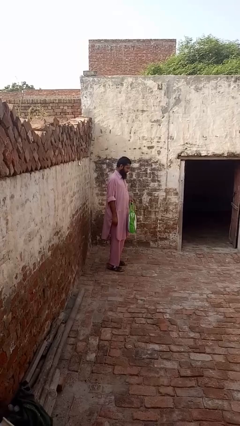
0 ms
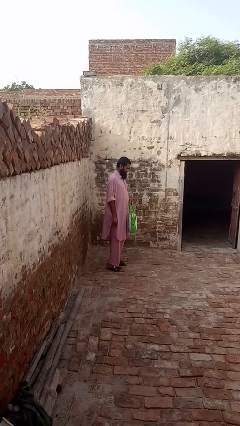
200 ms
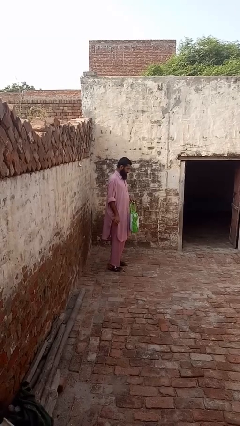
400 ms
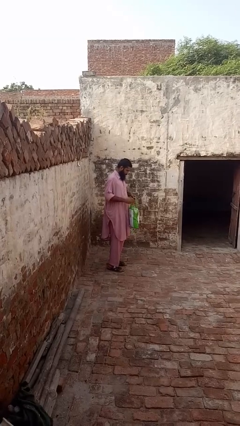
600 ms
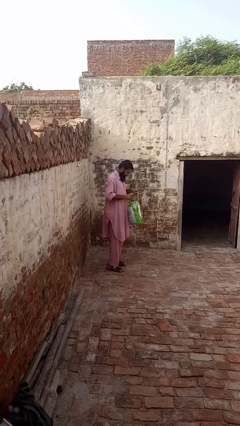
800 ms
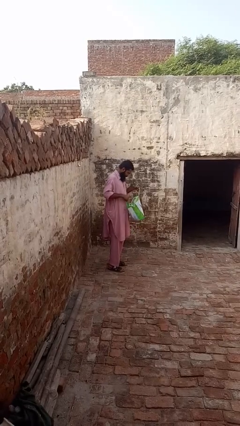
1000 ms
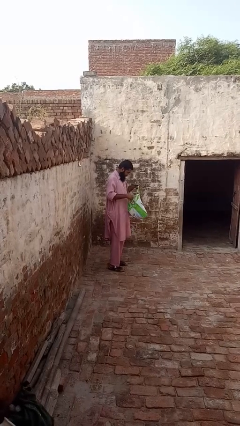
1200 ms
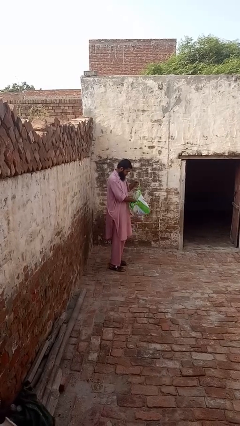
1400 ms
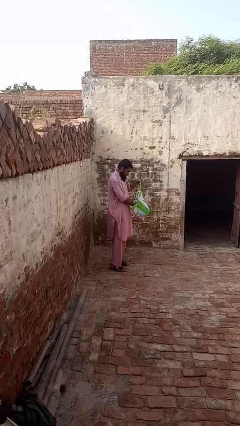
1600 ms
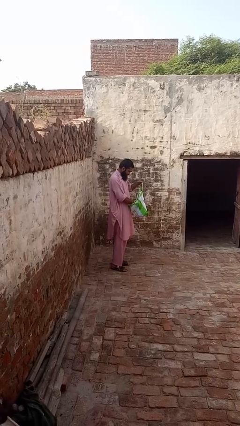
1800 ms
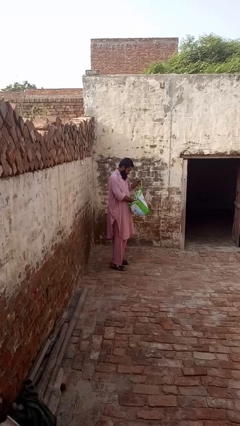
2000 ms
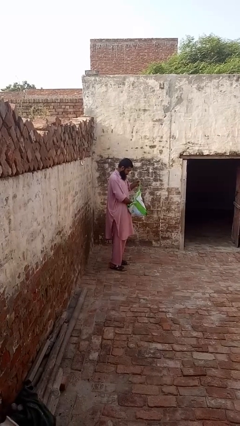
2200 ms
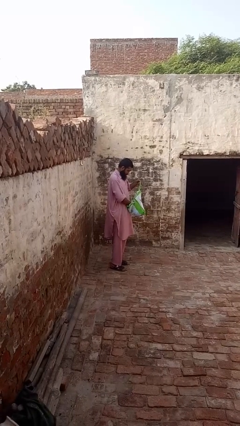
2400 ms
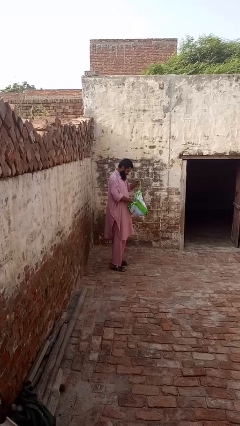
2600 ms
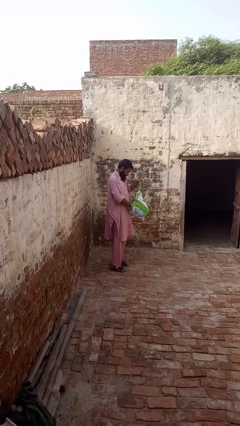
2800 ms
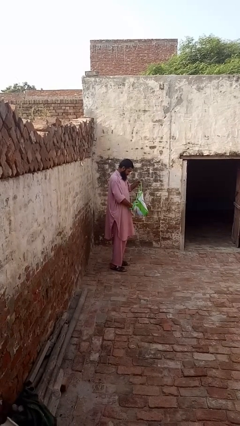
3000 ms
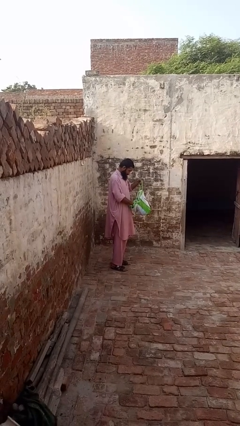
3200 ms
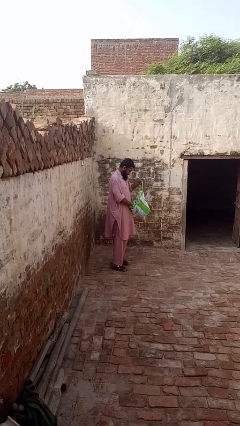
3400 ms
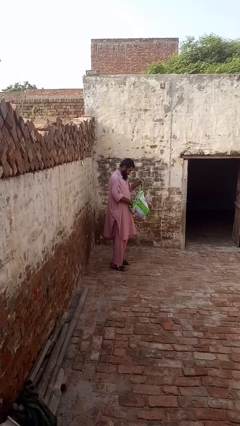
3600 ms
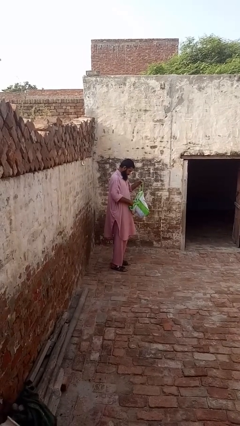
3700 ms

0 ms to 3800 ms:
person searches in bag

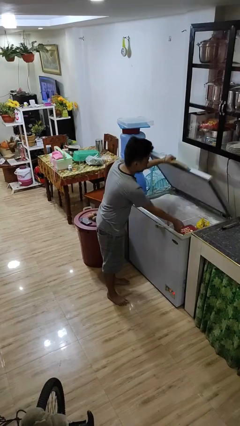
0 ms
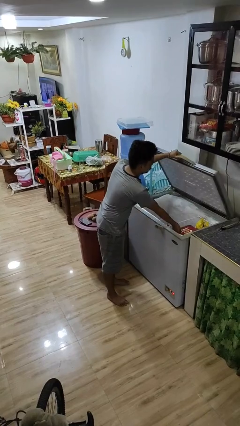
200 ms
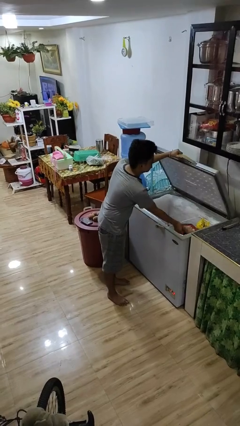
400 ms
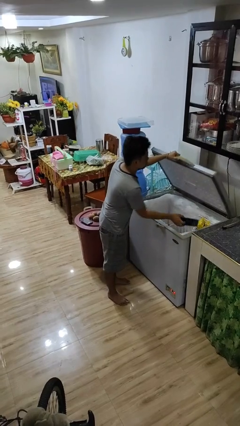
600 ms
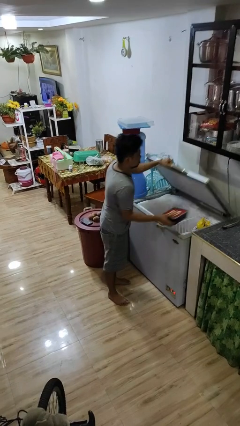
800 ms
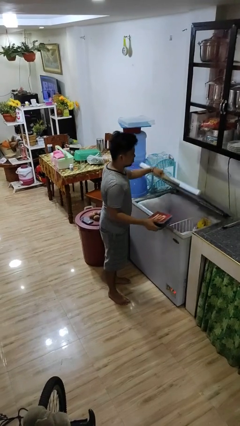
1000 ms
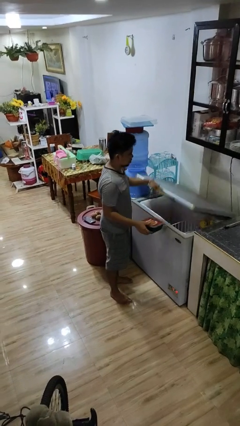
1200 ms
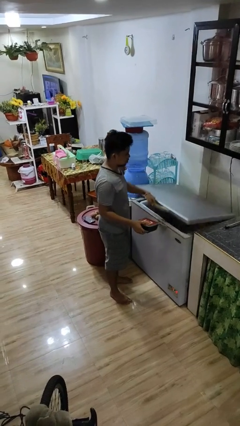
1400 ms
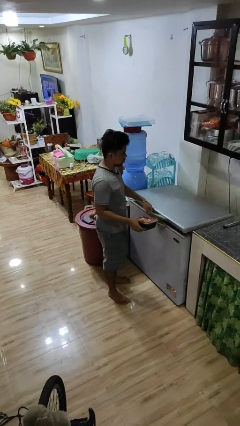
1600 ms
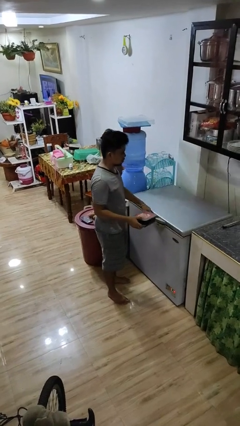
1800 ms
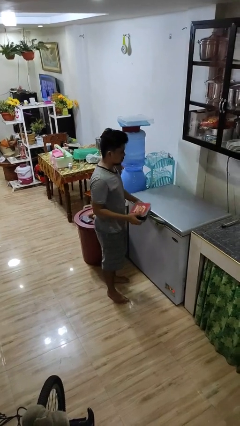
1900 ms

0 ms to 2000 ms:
person takes object from refrigerator

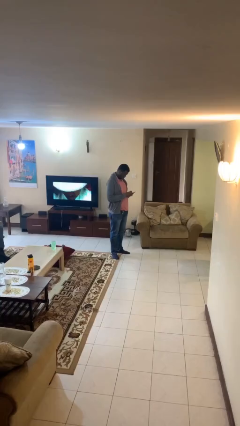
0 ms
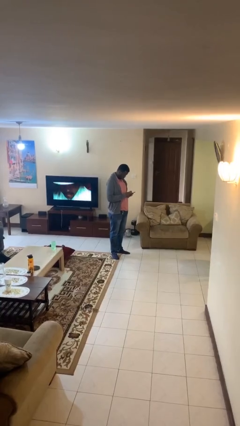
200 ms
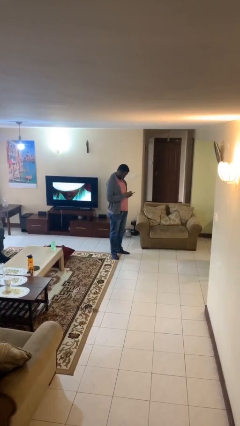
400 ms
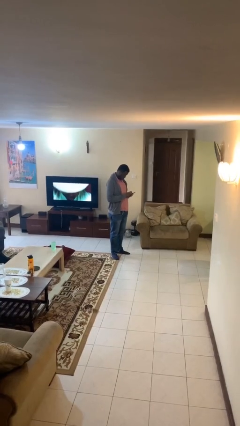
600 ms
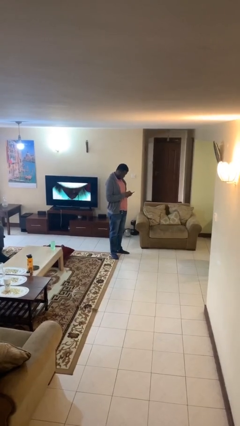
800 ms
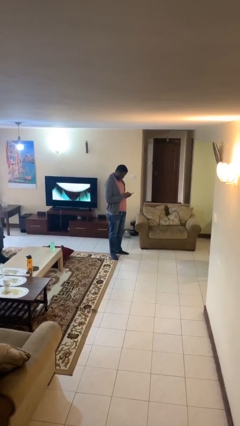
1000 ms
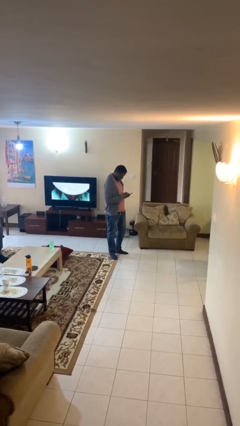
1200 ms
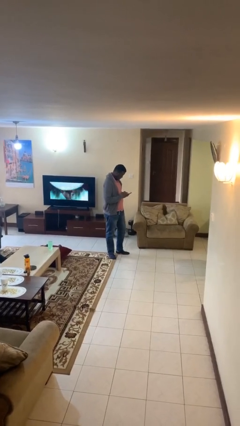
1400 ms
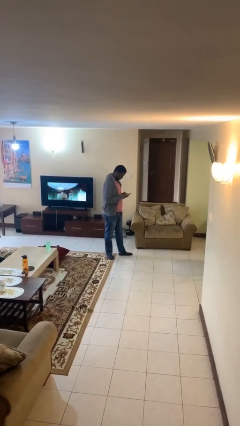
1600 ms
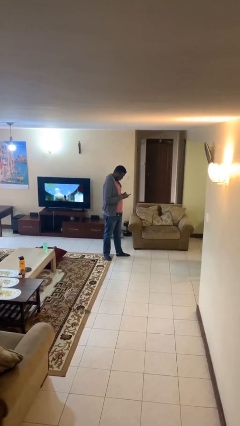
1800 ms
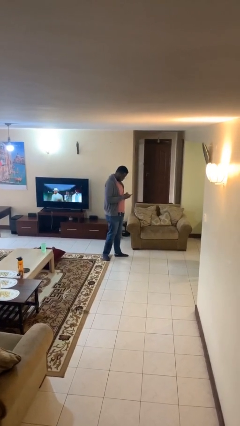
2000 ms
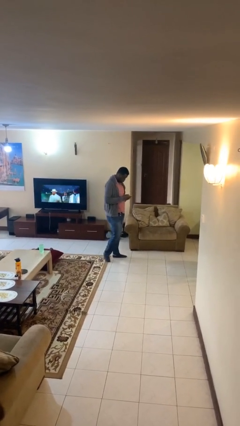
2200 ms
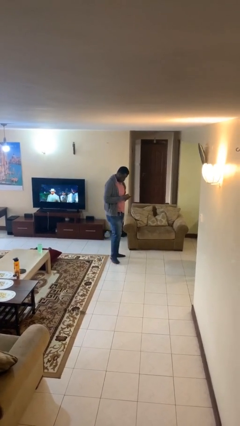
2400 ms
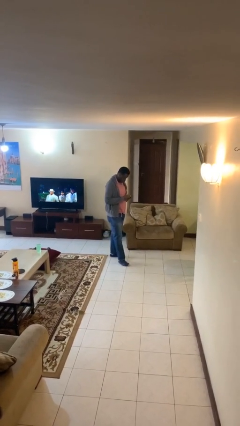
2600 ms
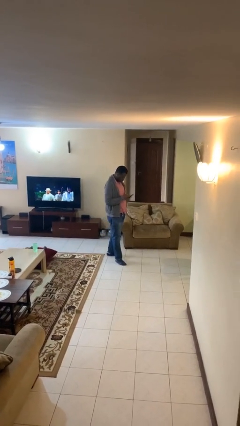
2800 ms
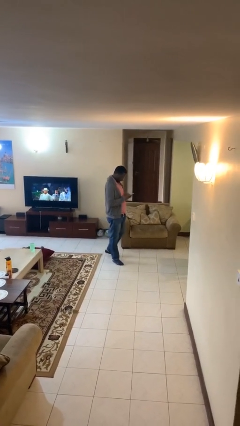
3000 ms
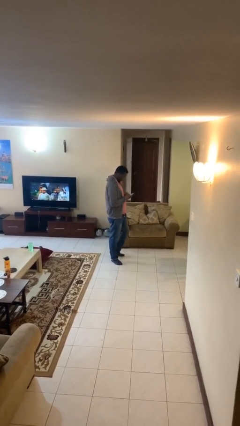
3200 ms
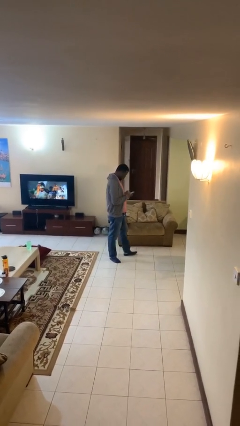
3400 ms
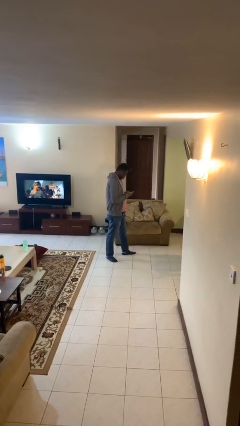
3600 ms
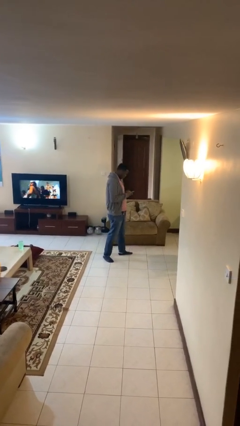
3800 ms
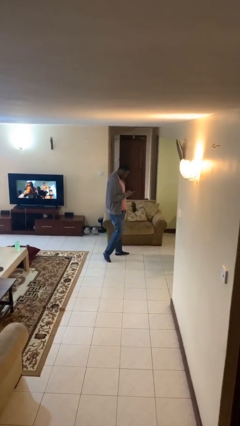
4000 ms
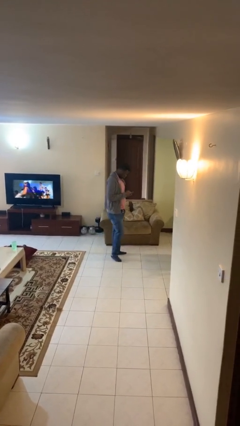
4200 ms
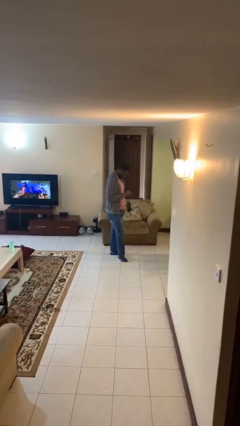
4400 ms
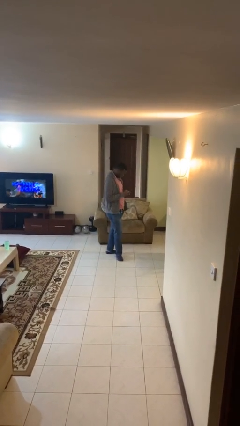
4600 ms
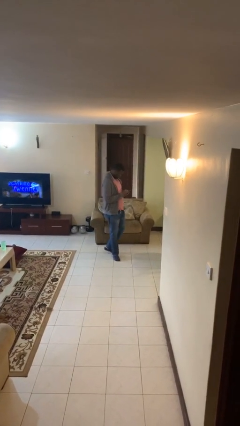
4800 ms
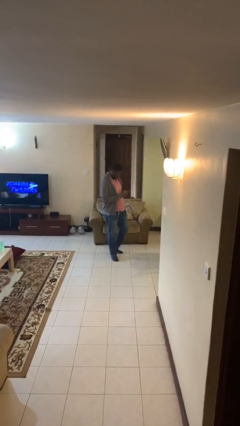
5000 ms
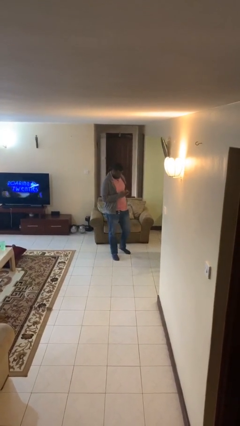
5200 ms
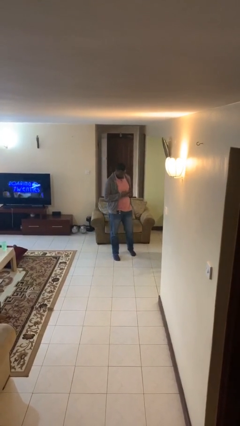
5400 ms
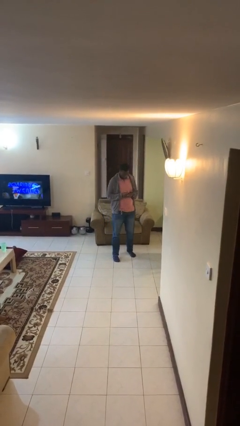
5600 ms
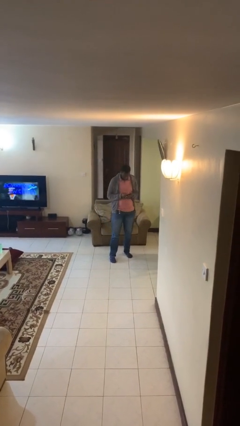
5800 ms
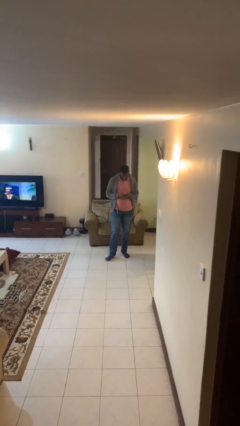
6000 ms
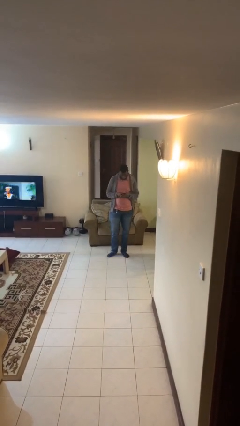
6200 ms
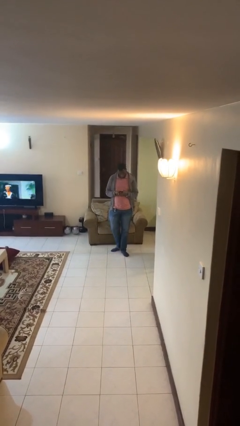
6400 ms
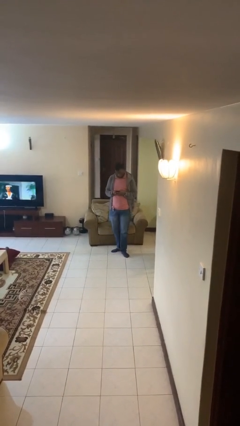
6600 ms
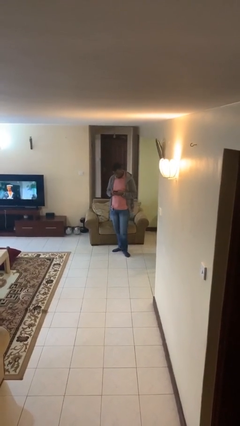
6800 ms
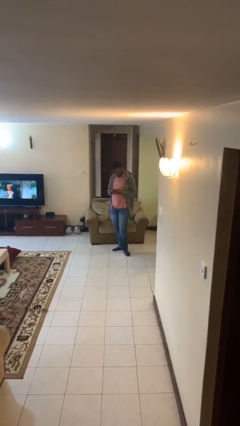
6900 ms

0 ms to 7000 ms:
person texts on phone

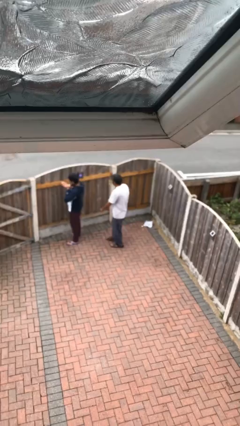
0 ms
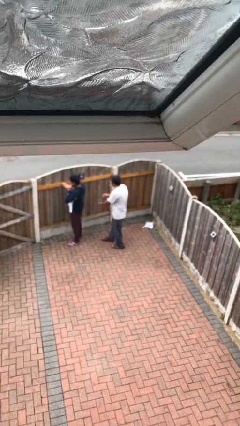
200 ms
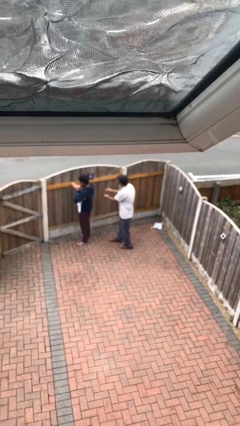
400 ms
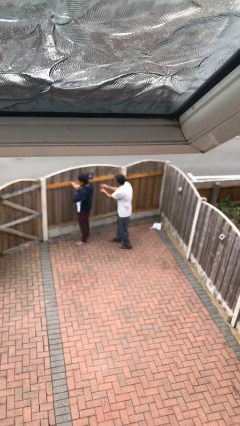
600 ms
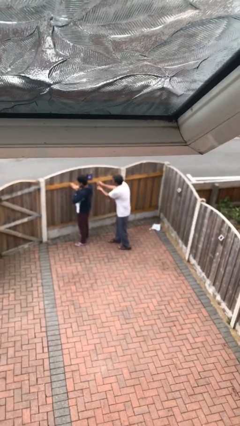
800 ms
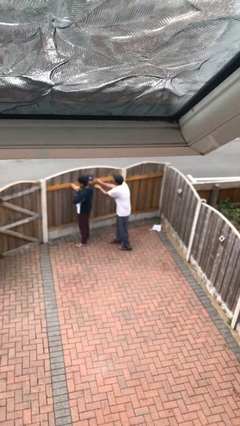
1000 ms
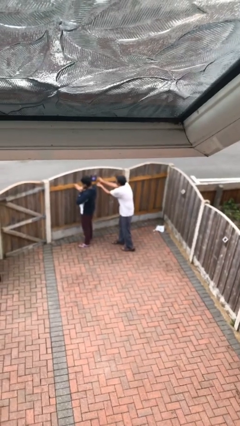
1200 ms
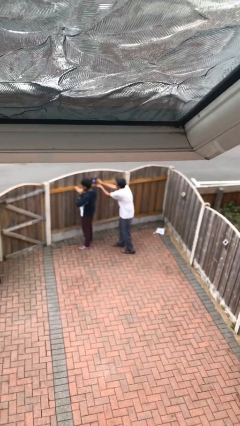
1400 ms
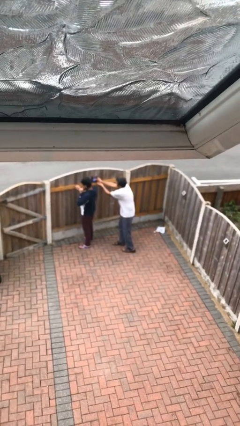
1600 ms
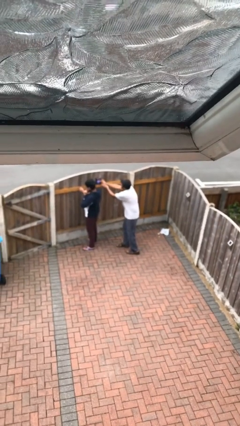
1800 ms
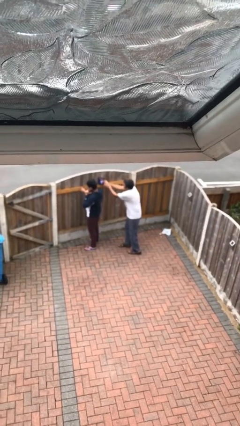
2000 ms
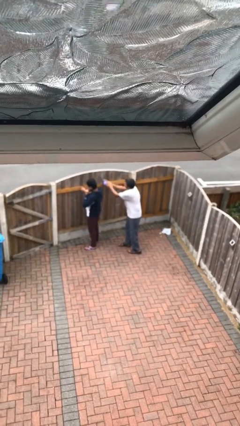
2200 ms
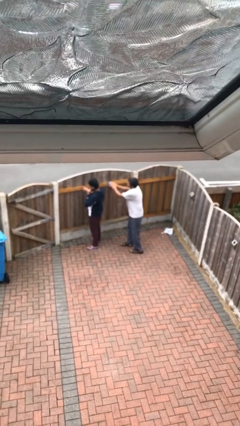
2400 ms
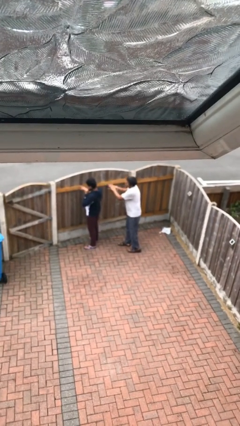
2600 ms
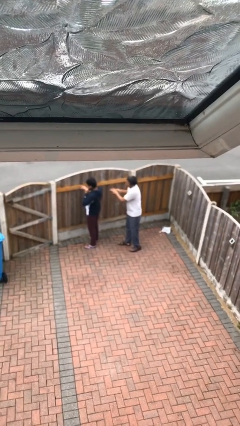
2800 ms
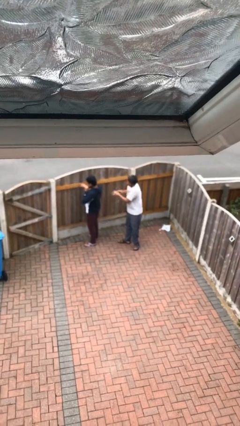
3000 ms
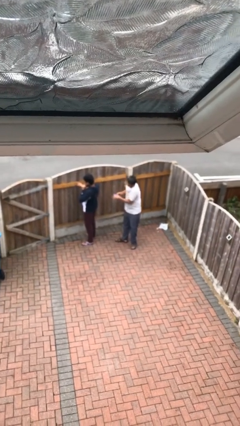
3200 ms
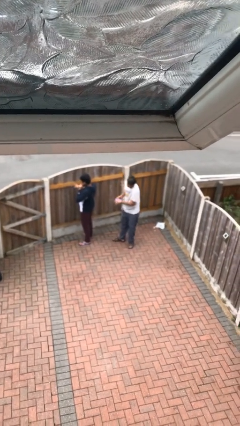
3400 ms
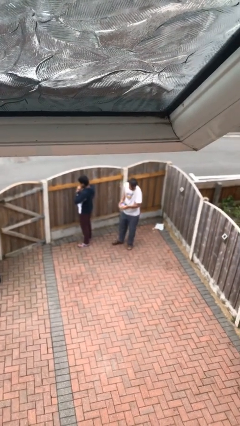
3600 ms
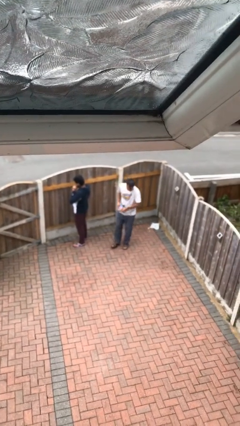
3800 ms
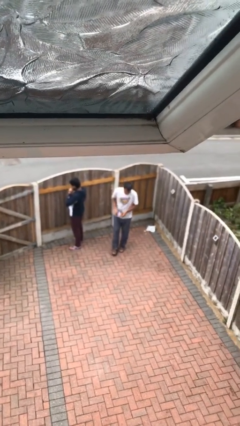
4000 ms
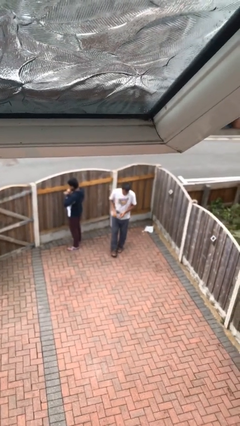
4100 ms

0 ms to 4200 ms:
person steals object from person

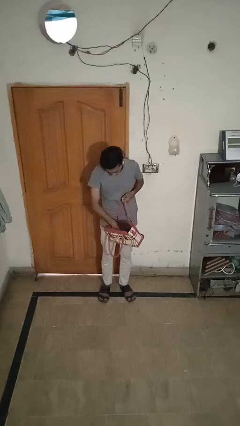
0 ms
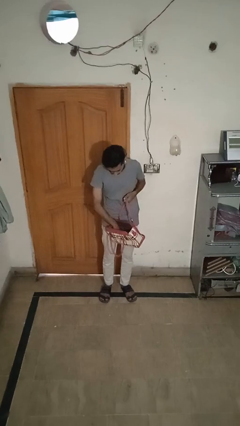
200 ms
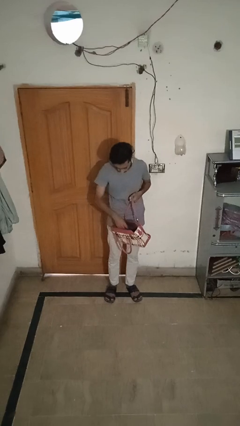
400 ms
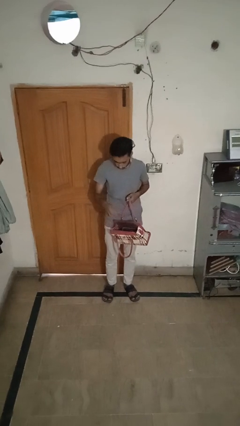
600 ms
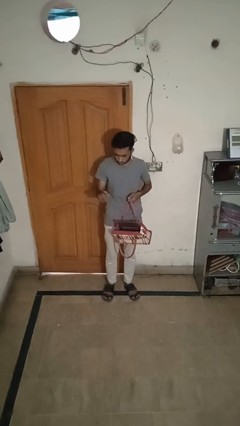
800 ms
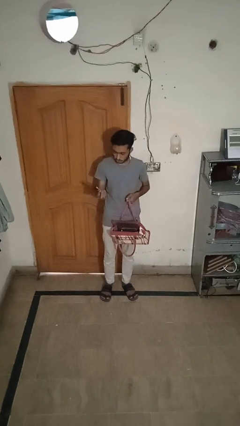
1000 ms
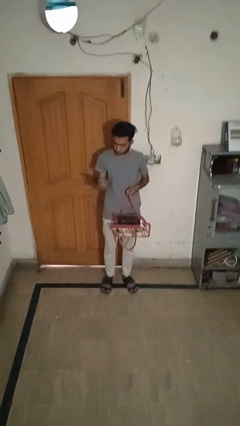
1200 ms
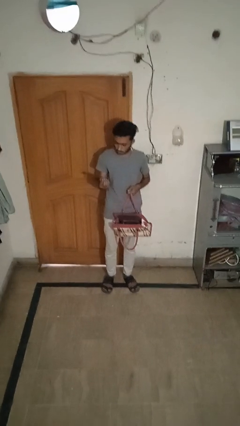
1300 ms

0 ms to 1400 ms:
person takes object from purse
